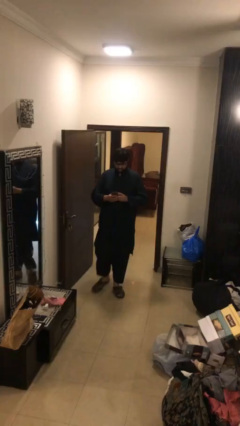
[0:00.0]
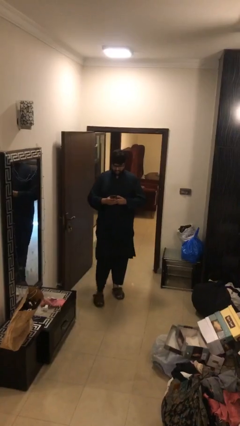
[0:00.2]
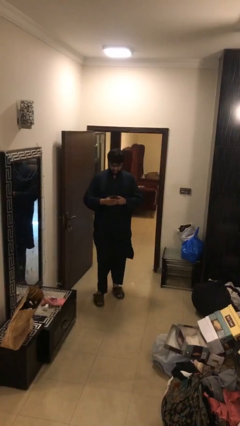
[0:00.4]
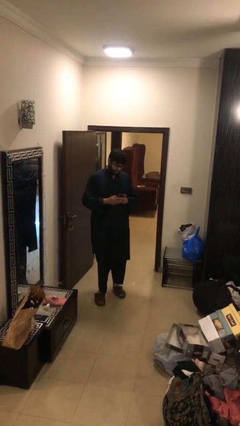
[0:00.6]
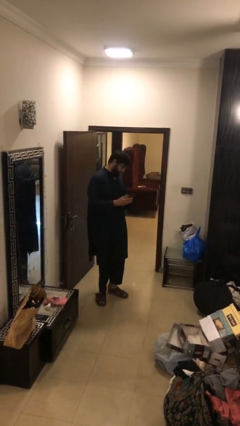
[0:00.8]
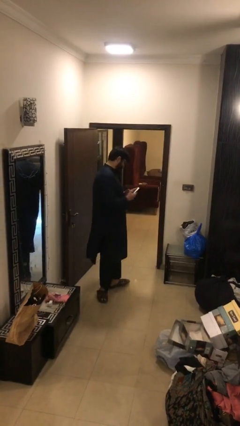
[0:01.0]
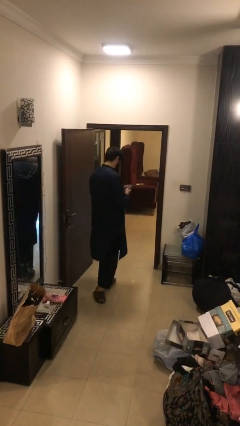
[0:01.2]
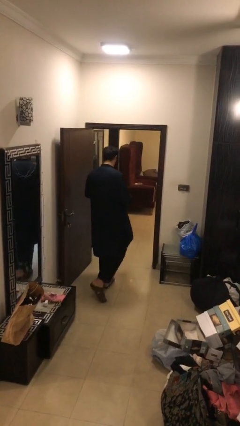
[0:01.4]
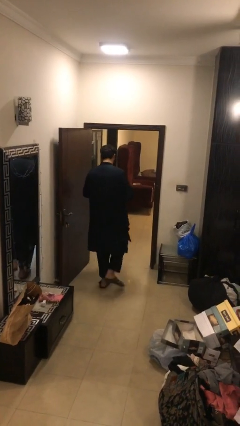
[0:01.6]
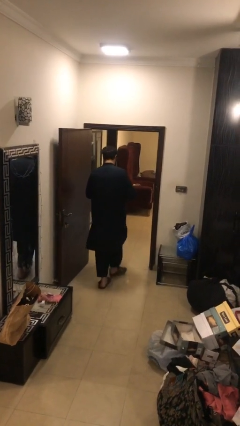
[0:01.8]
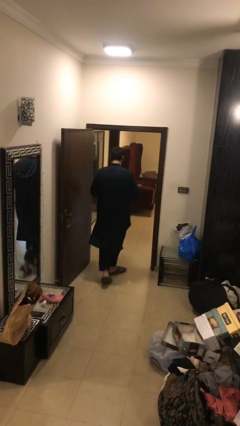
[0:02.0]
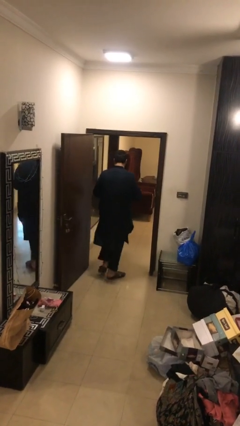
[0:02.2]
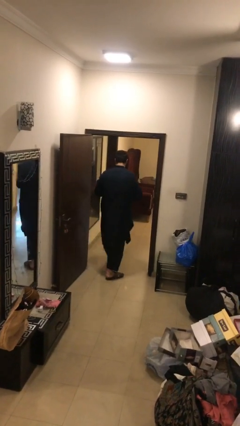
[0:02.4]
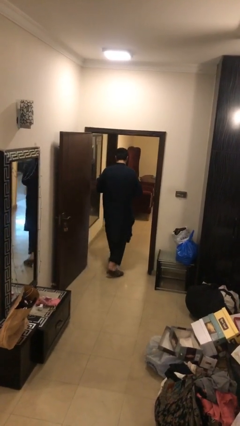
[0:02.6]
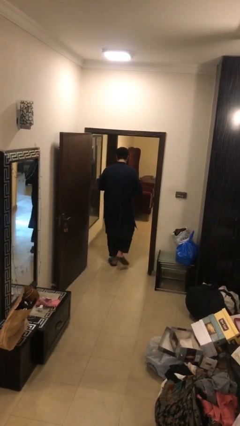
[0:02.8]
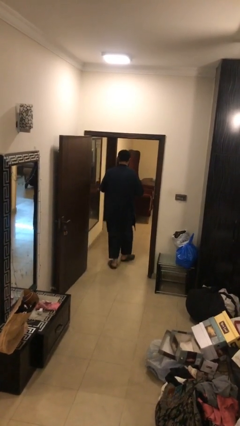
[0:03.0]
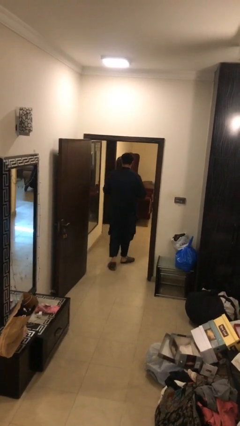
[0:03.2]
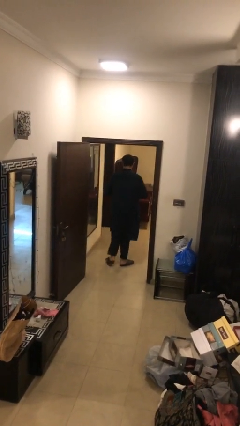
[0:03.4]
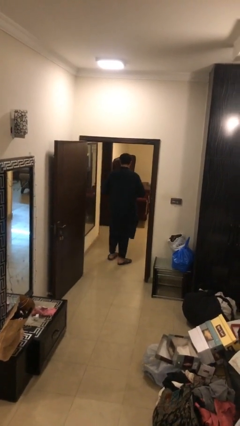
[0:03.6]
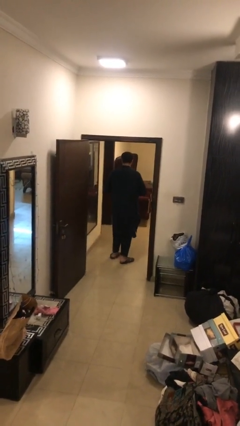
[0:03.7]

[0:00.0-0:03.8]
person exits scene through structure

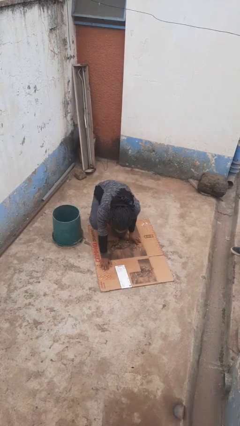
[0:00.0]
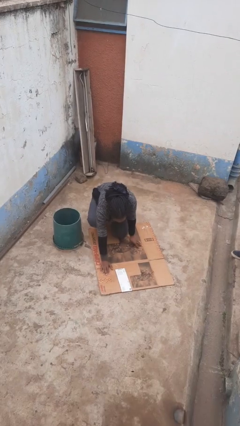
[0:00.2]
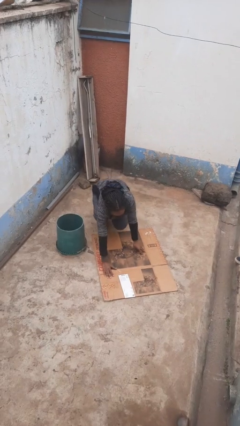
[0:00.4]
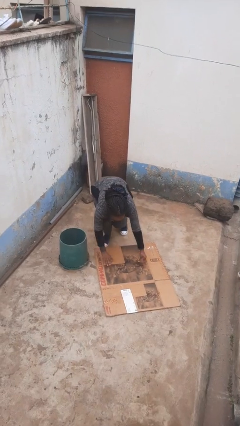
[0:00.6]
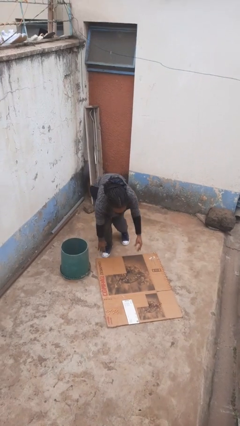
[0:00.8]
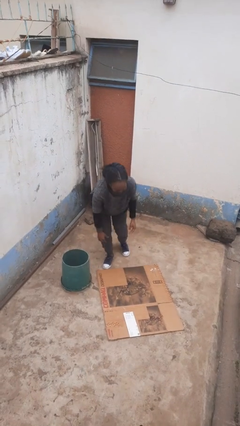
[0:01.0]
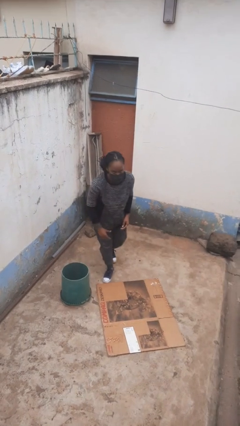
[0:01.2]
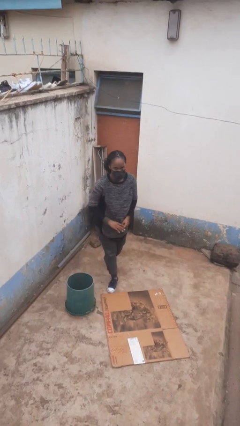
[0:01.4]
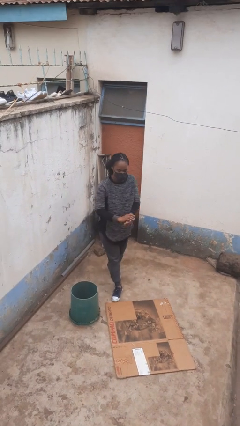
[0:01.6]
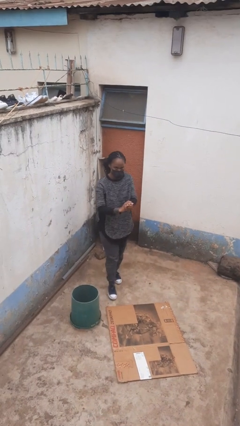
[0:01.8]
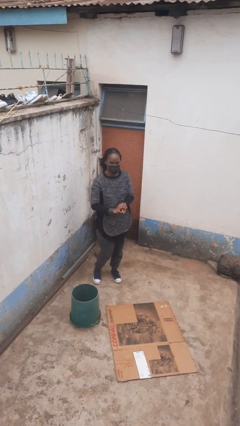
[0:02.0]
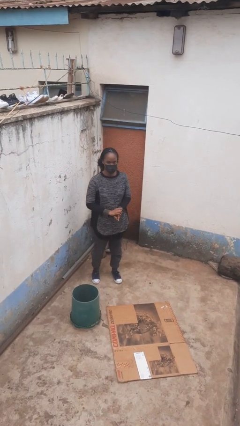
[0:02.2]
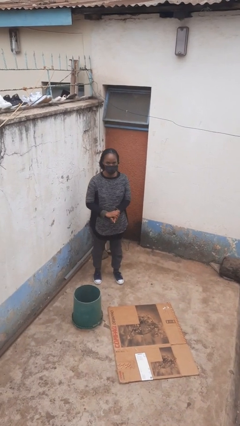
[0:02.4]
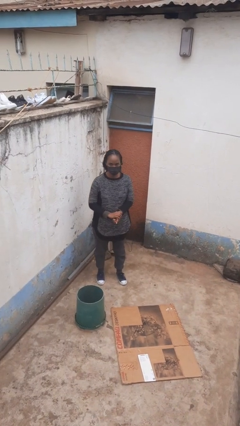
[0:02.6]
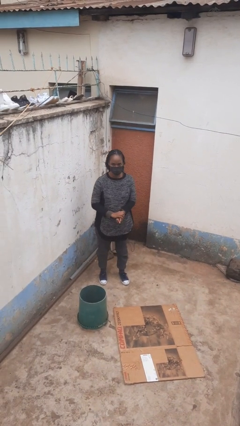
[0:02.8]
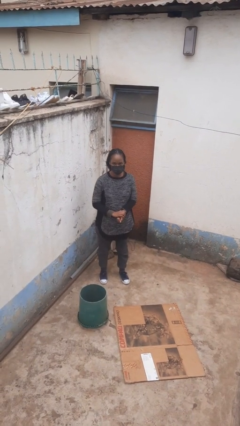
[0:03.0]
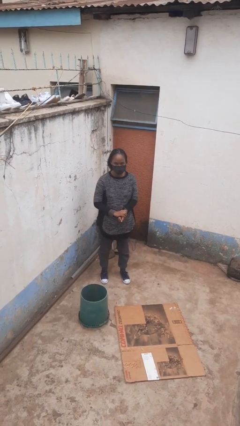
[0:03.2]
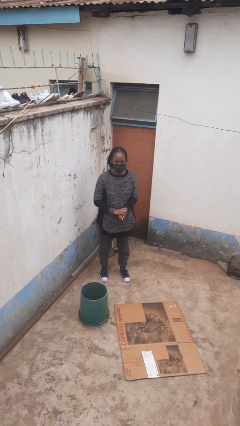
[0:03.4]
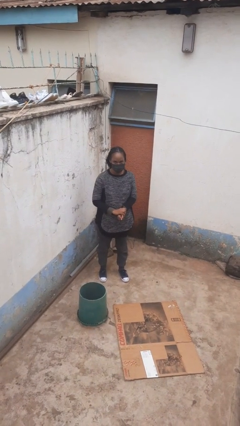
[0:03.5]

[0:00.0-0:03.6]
person stands up from floor

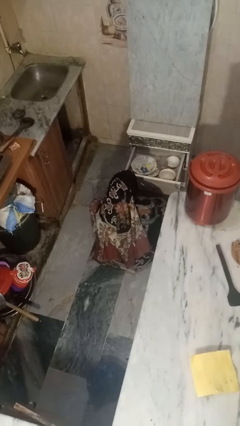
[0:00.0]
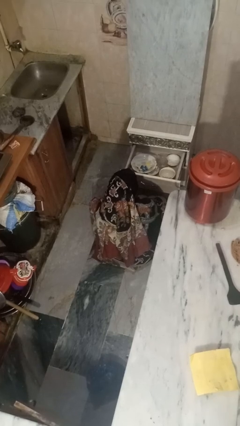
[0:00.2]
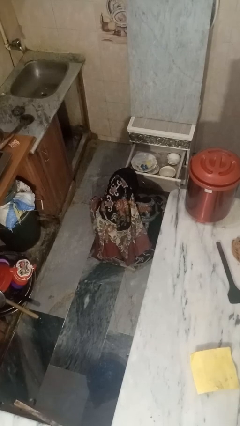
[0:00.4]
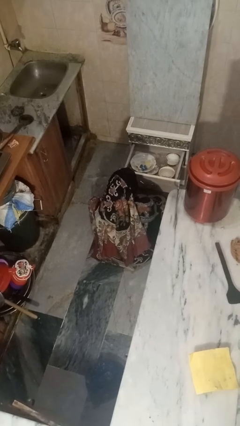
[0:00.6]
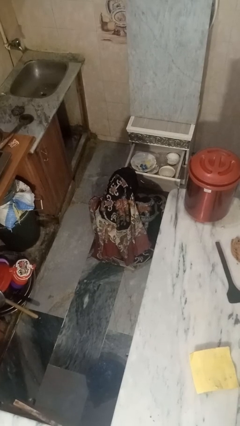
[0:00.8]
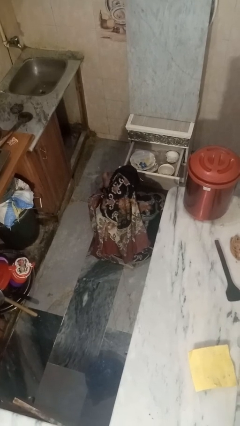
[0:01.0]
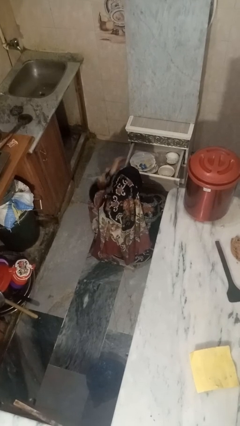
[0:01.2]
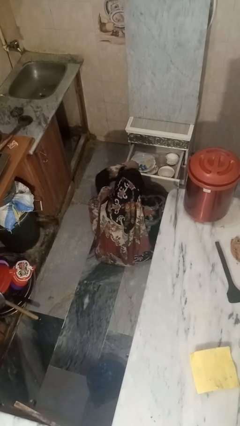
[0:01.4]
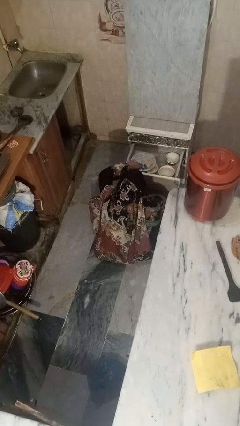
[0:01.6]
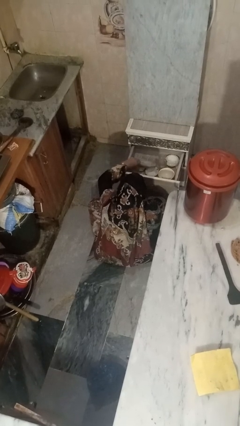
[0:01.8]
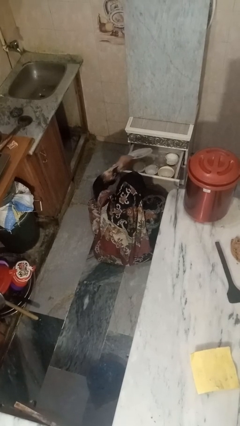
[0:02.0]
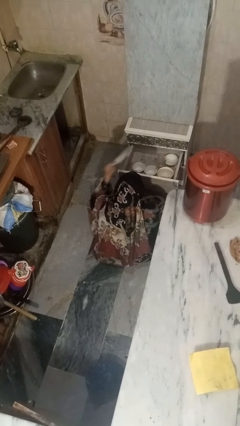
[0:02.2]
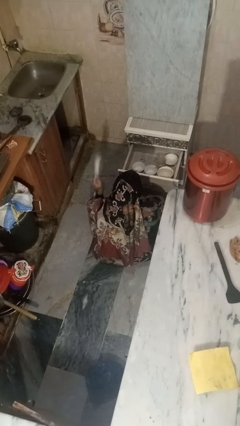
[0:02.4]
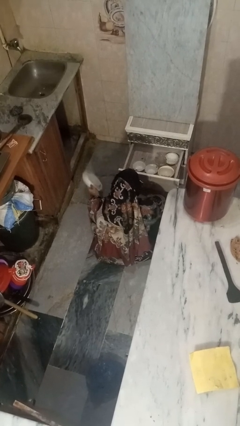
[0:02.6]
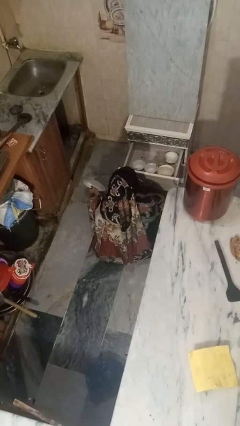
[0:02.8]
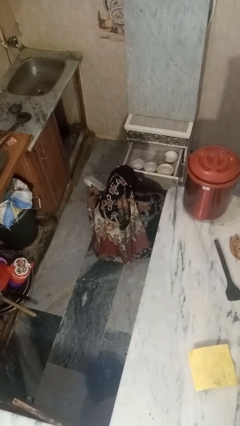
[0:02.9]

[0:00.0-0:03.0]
person takes object from kitchen drawer

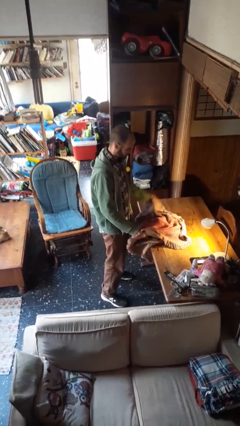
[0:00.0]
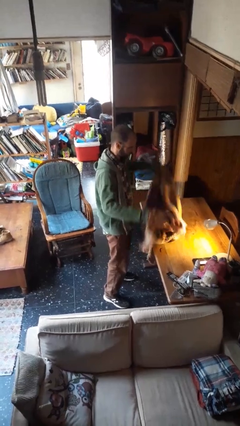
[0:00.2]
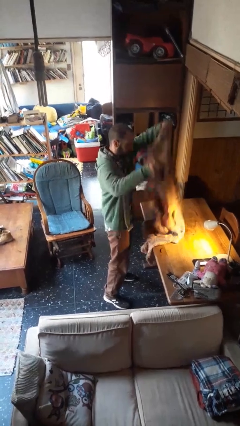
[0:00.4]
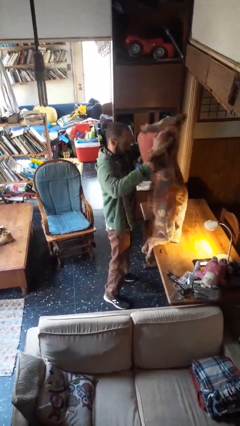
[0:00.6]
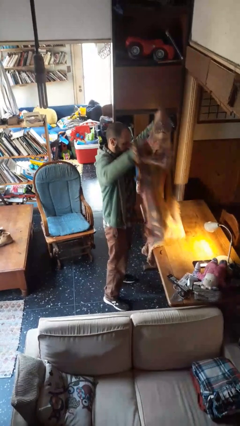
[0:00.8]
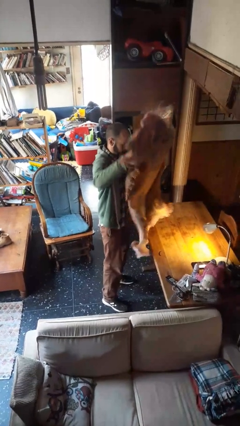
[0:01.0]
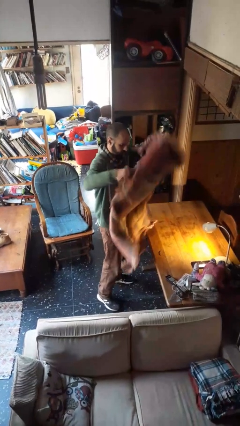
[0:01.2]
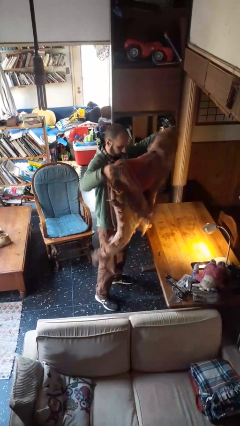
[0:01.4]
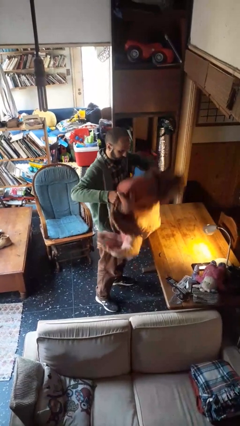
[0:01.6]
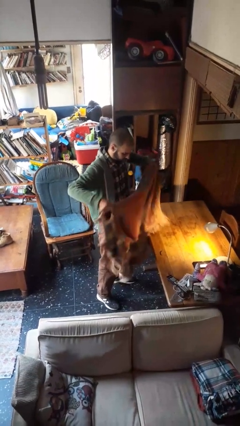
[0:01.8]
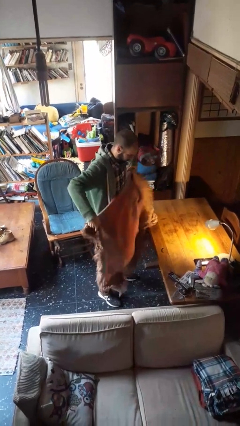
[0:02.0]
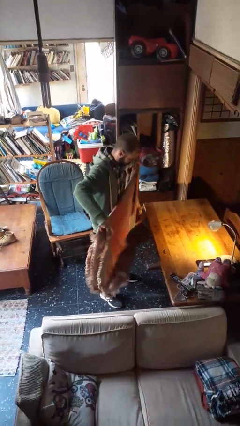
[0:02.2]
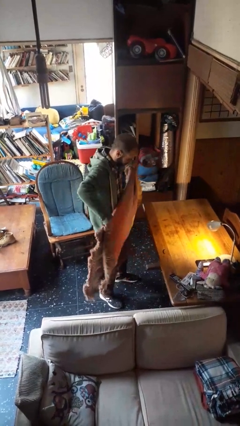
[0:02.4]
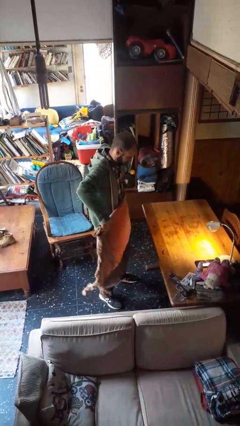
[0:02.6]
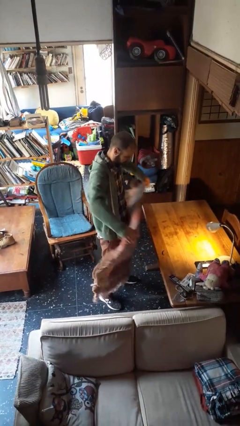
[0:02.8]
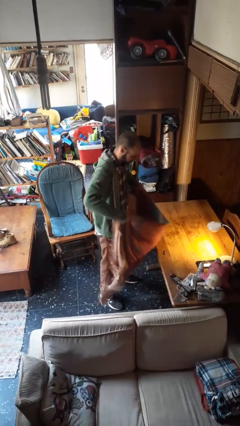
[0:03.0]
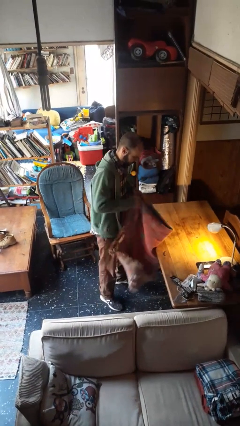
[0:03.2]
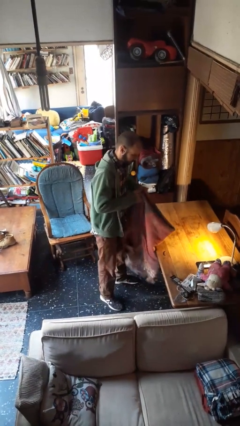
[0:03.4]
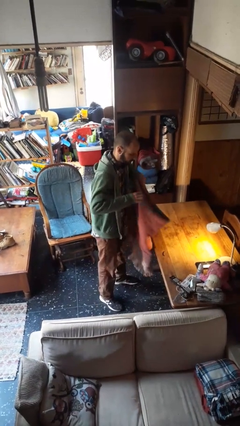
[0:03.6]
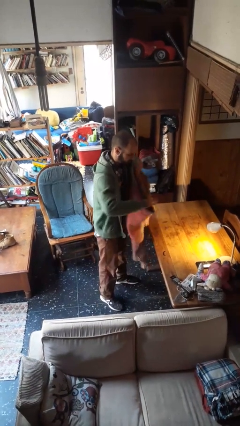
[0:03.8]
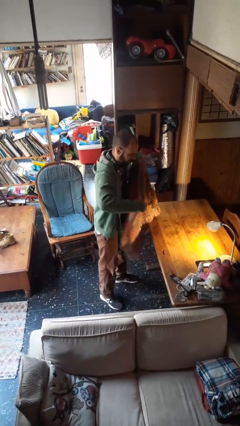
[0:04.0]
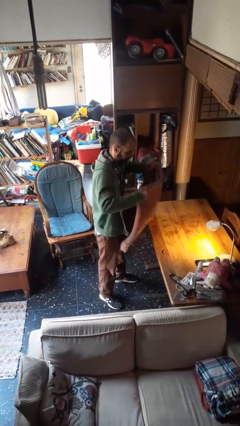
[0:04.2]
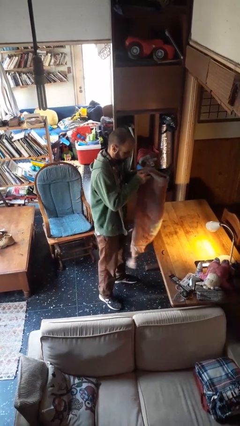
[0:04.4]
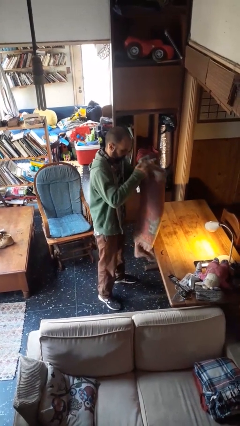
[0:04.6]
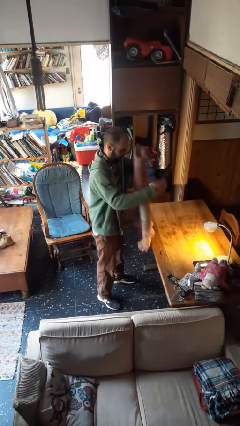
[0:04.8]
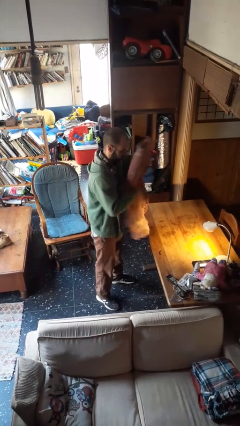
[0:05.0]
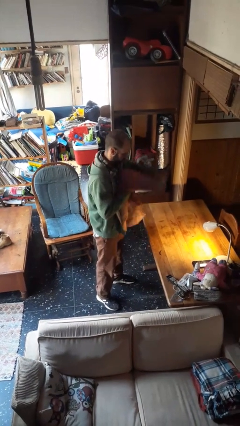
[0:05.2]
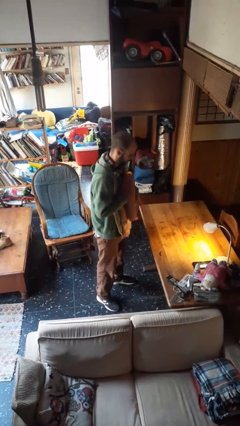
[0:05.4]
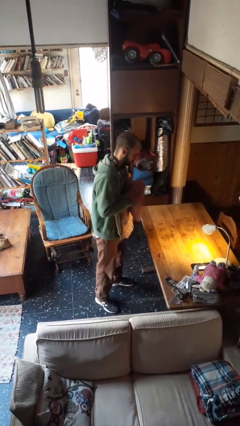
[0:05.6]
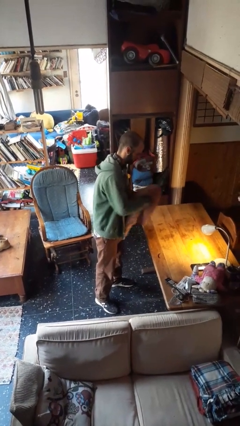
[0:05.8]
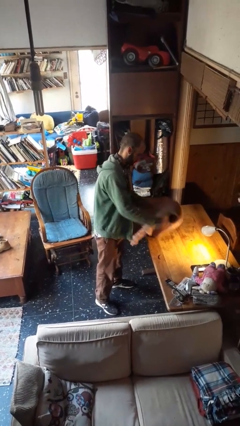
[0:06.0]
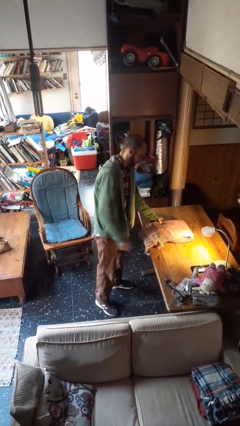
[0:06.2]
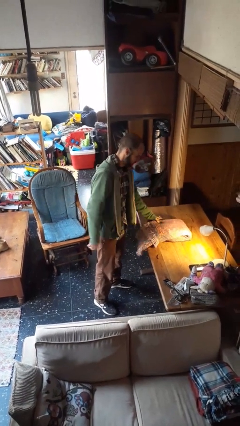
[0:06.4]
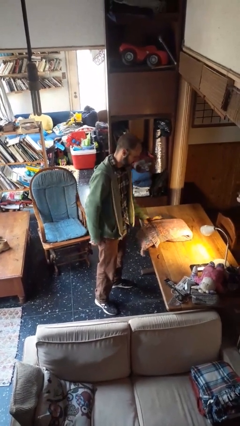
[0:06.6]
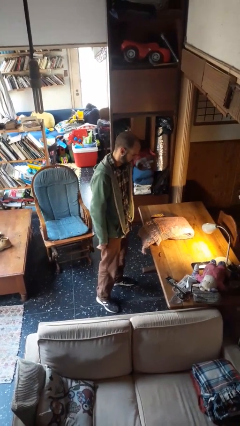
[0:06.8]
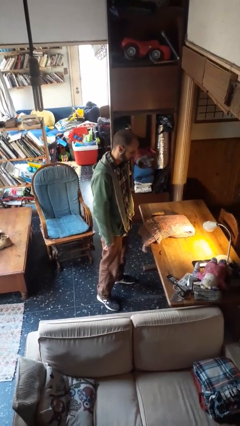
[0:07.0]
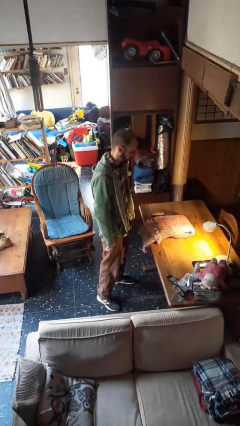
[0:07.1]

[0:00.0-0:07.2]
person folds blanket

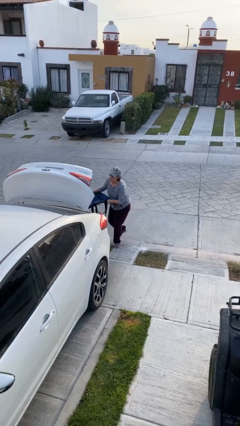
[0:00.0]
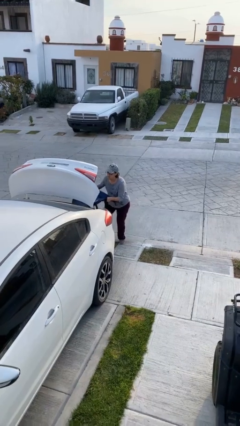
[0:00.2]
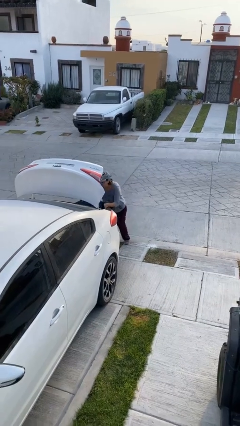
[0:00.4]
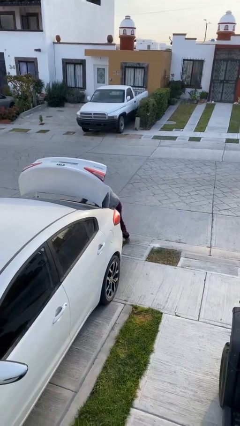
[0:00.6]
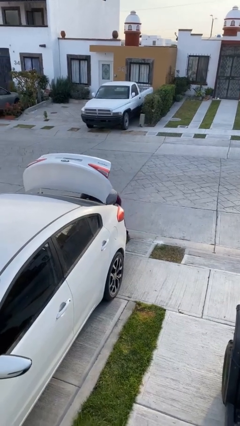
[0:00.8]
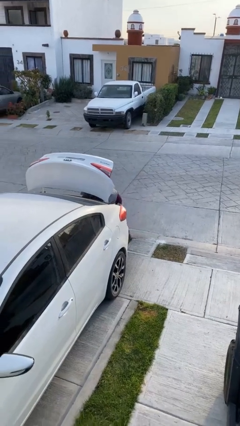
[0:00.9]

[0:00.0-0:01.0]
person loads car
